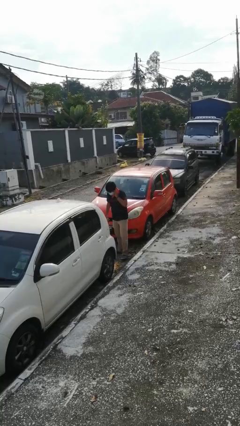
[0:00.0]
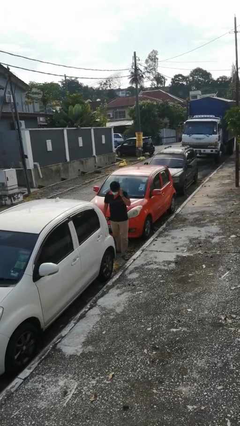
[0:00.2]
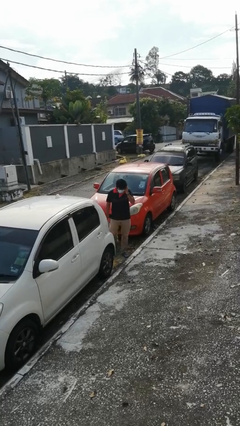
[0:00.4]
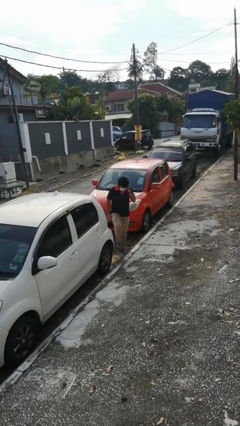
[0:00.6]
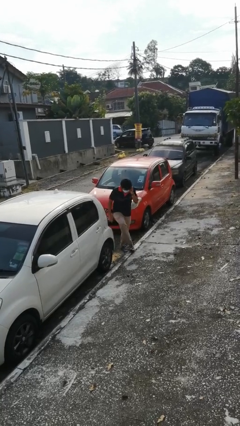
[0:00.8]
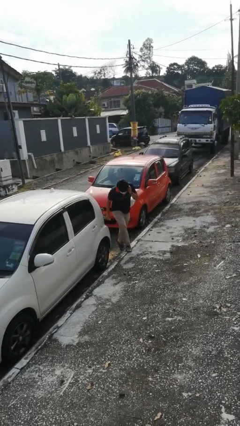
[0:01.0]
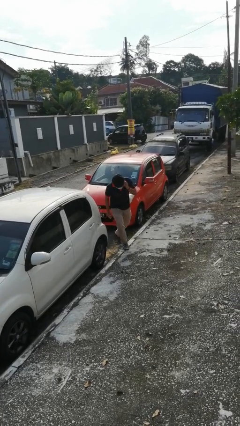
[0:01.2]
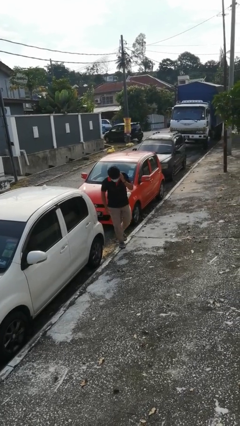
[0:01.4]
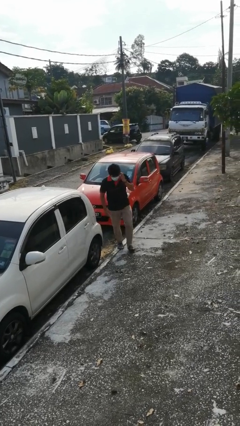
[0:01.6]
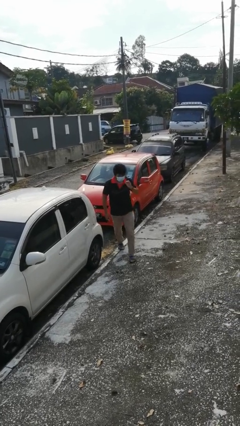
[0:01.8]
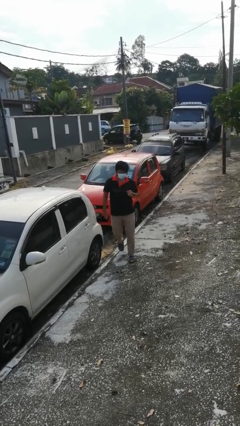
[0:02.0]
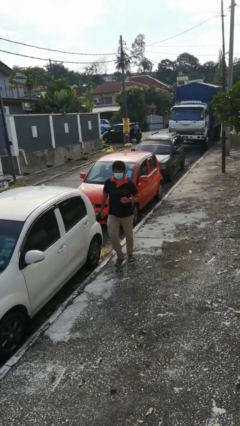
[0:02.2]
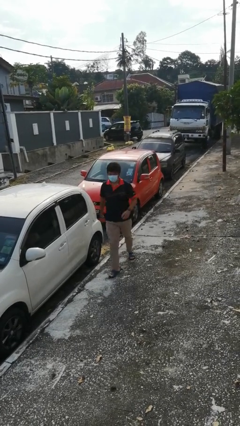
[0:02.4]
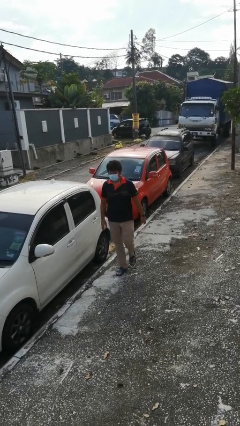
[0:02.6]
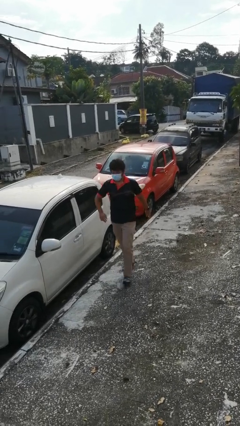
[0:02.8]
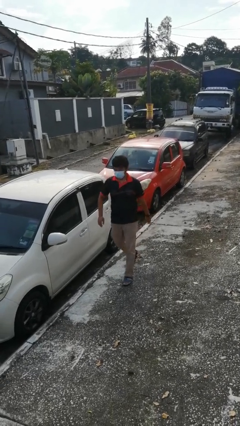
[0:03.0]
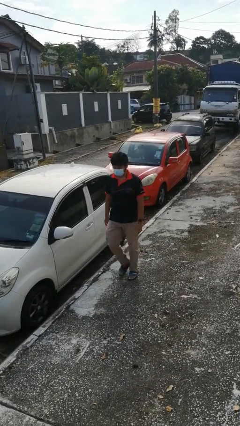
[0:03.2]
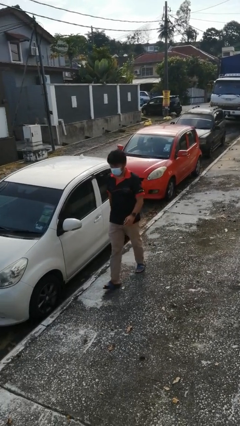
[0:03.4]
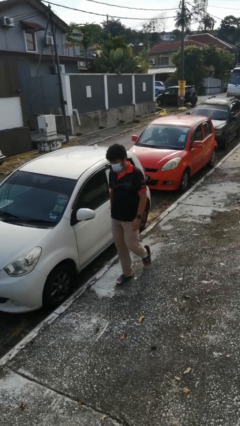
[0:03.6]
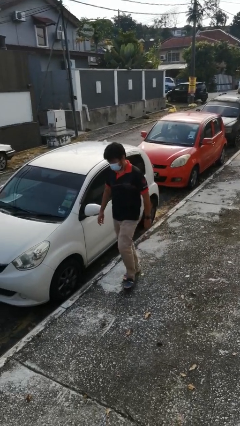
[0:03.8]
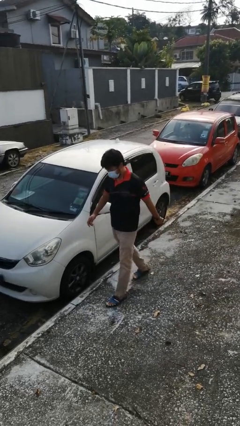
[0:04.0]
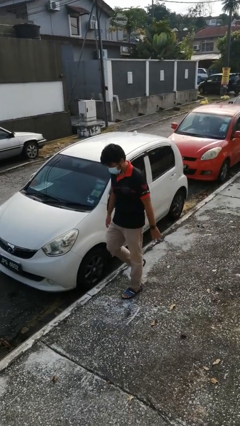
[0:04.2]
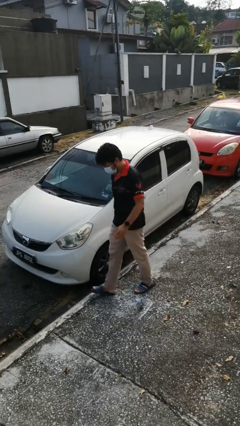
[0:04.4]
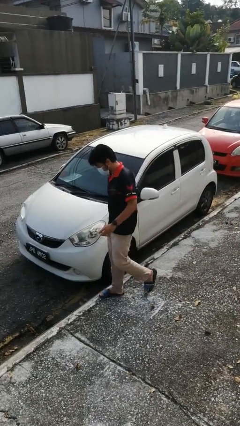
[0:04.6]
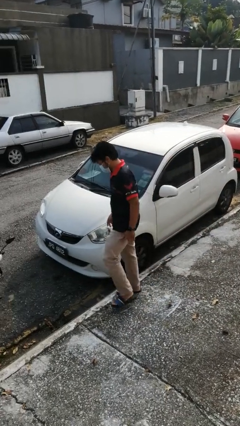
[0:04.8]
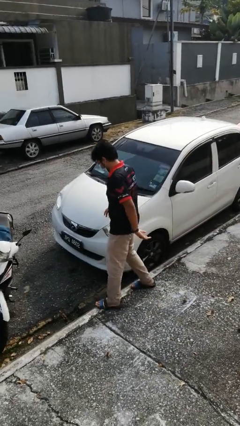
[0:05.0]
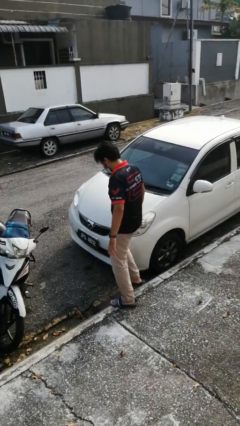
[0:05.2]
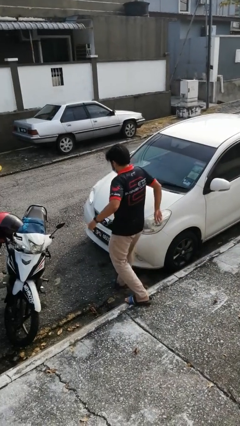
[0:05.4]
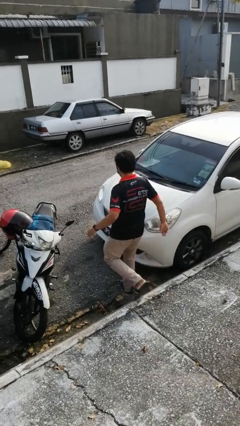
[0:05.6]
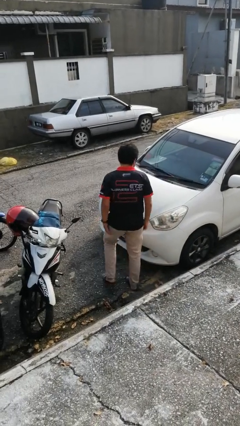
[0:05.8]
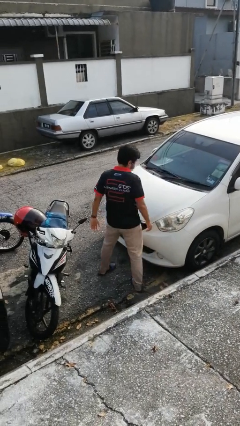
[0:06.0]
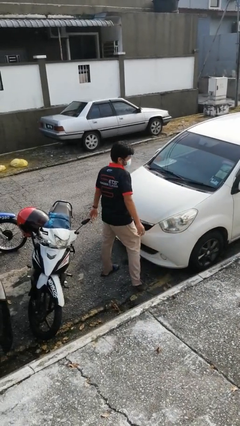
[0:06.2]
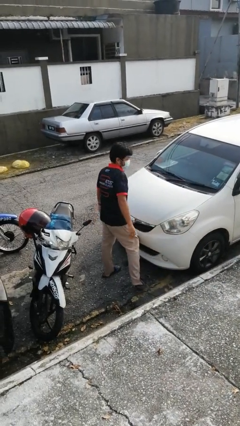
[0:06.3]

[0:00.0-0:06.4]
person walks around car

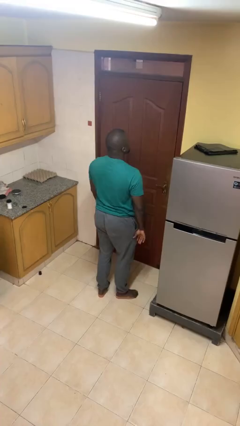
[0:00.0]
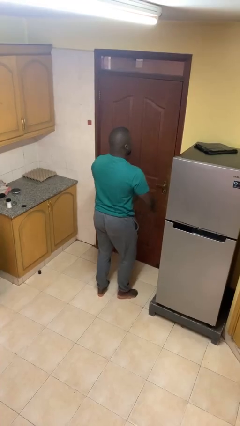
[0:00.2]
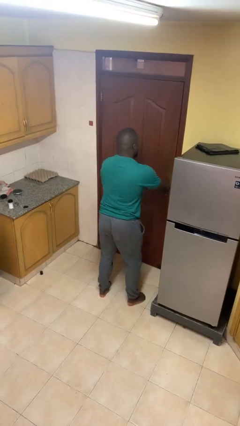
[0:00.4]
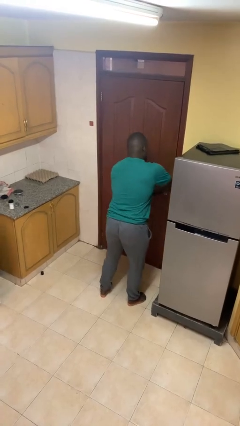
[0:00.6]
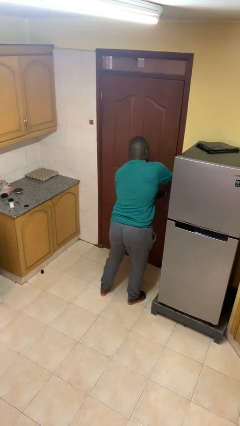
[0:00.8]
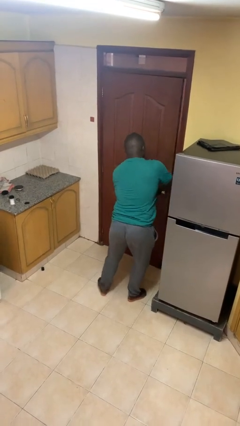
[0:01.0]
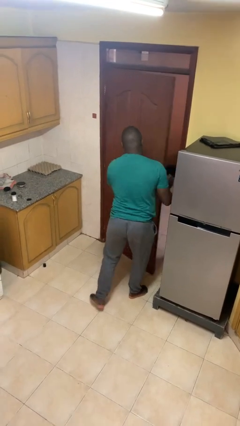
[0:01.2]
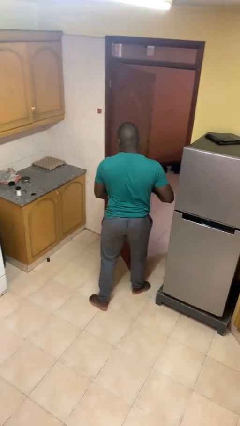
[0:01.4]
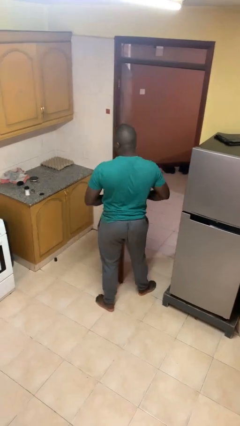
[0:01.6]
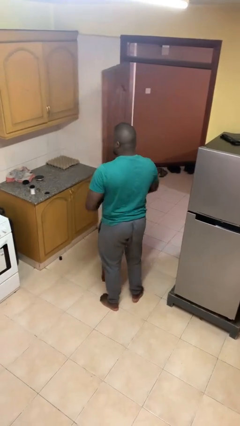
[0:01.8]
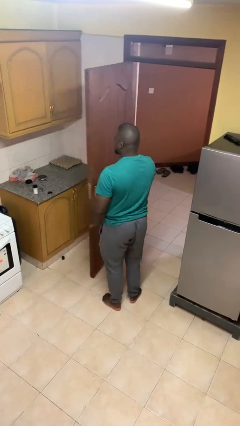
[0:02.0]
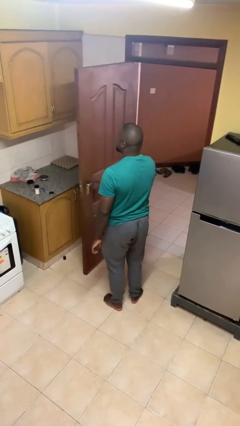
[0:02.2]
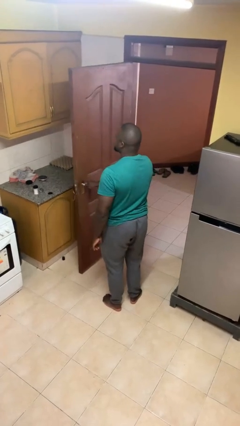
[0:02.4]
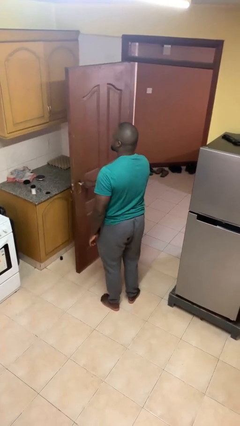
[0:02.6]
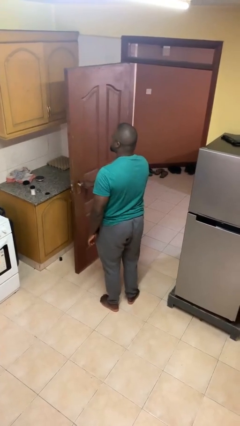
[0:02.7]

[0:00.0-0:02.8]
person opens facility door

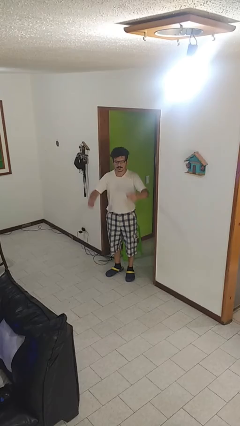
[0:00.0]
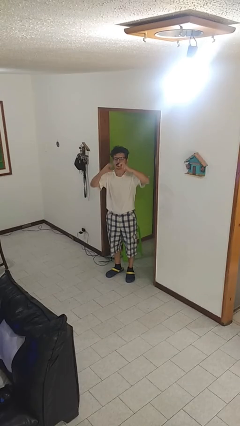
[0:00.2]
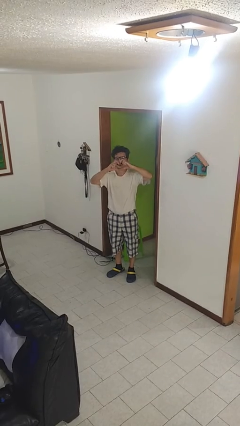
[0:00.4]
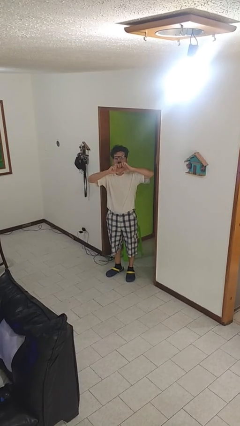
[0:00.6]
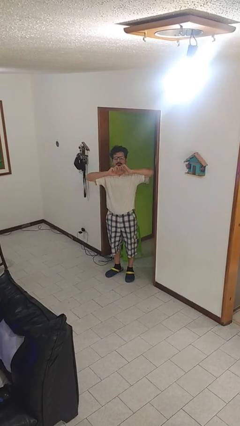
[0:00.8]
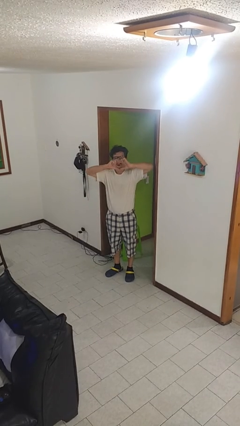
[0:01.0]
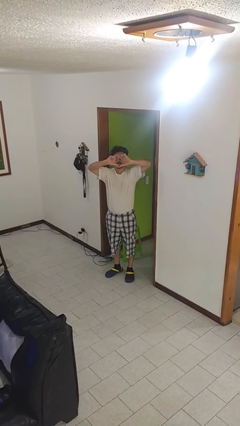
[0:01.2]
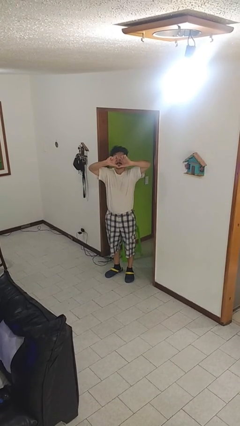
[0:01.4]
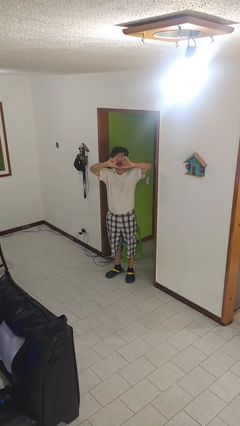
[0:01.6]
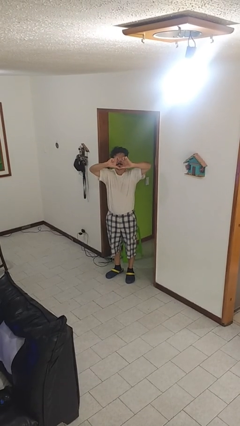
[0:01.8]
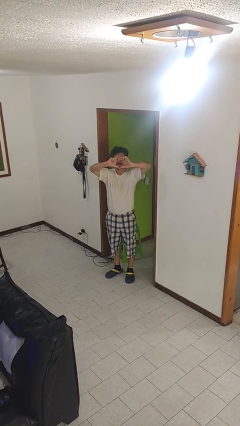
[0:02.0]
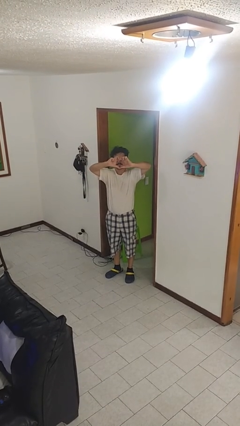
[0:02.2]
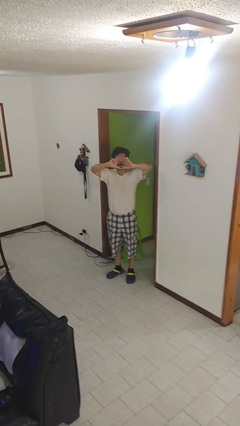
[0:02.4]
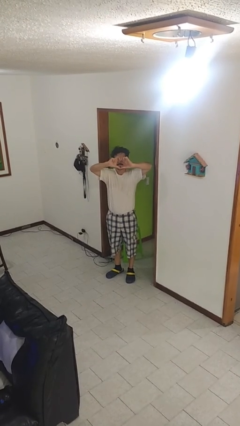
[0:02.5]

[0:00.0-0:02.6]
person gestures heart

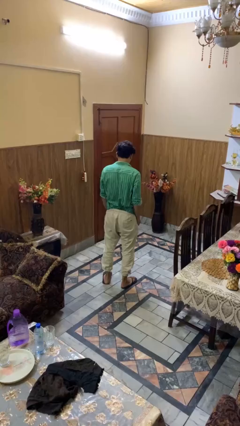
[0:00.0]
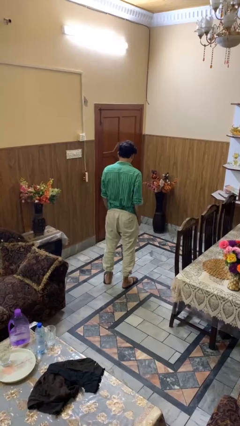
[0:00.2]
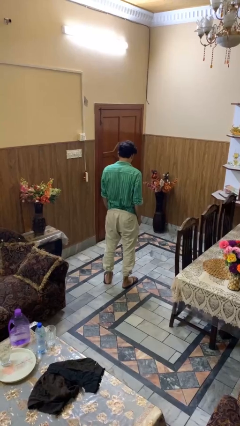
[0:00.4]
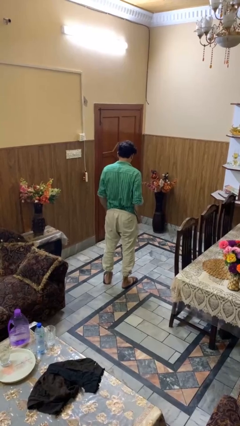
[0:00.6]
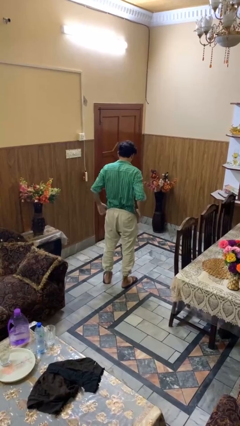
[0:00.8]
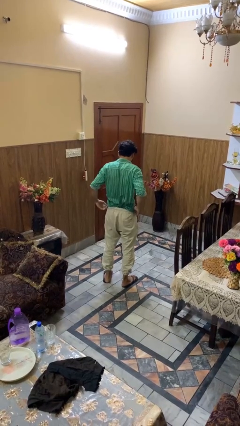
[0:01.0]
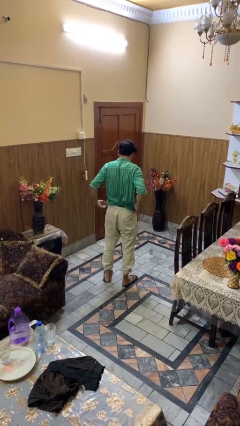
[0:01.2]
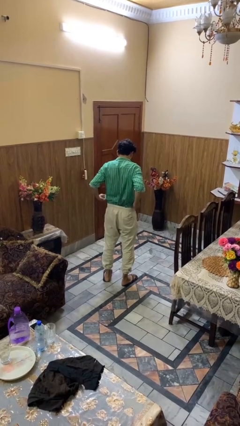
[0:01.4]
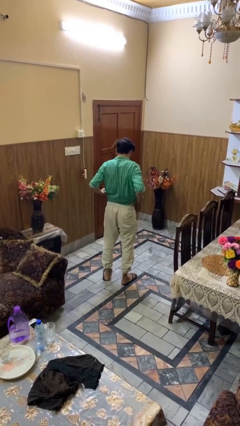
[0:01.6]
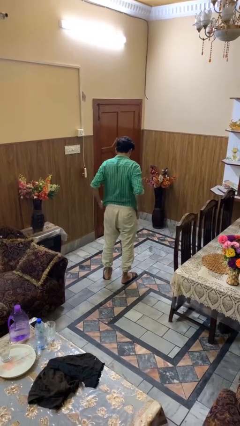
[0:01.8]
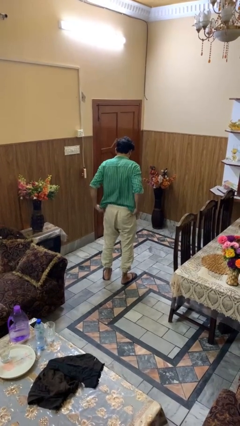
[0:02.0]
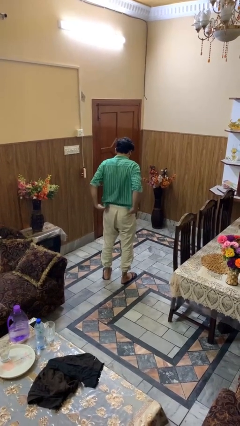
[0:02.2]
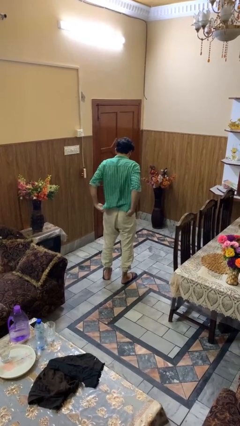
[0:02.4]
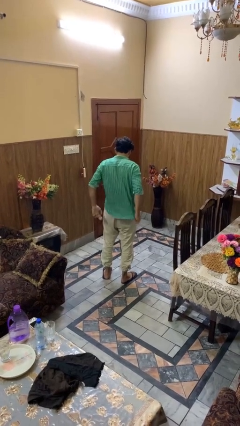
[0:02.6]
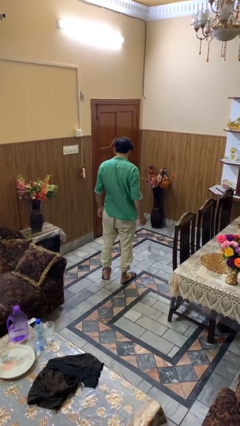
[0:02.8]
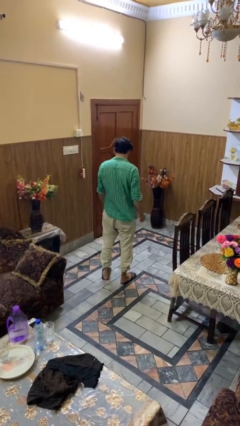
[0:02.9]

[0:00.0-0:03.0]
person untucks shirt

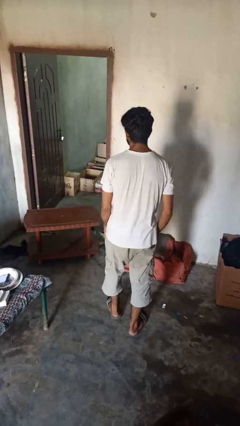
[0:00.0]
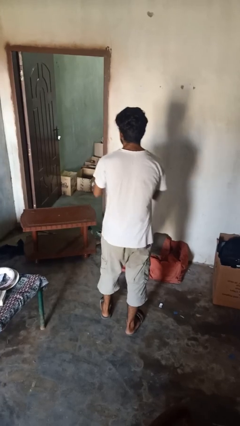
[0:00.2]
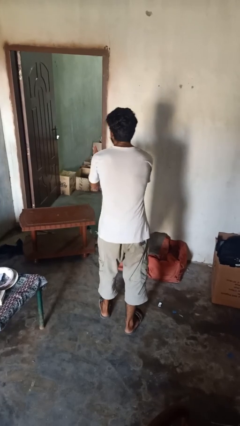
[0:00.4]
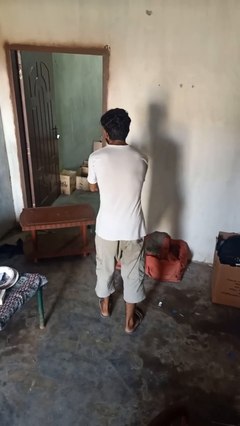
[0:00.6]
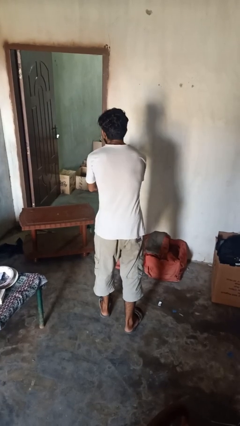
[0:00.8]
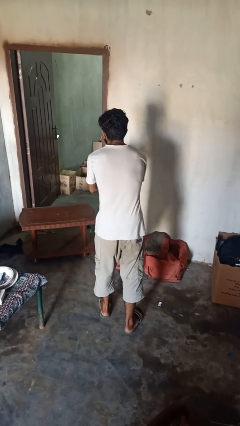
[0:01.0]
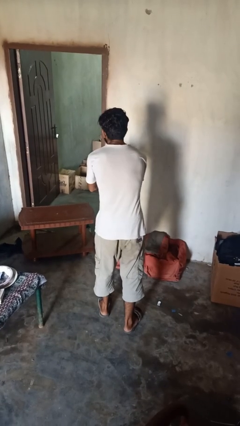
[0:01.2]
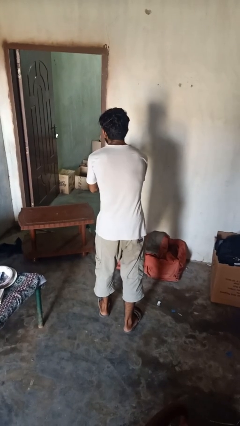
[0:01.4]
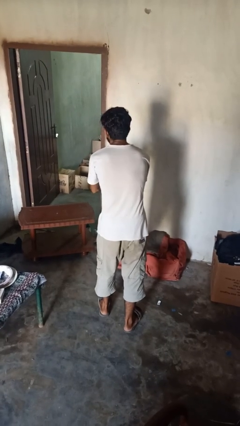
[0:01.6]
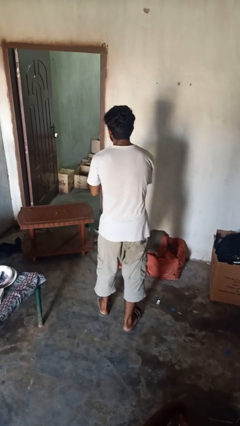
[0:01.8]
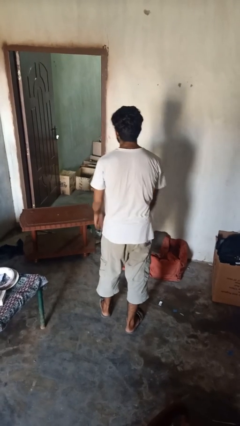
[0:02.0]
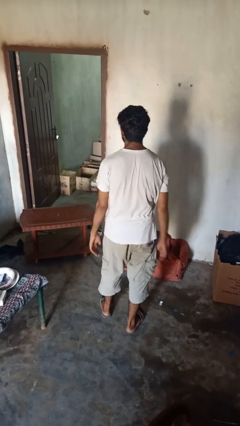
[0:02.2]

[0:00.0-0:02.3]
person karate chop

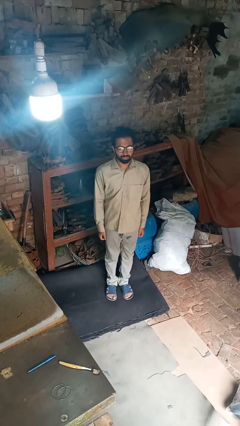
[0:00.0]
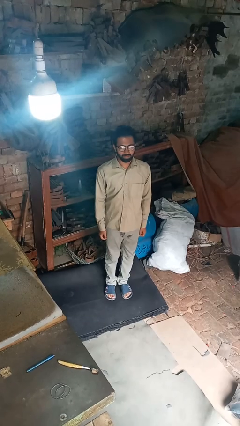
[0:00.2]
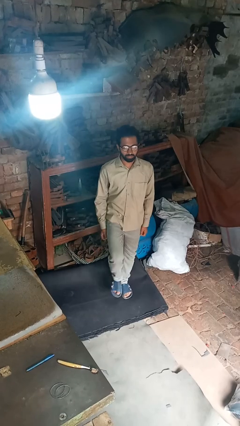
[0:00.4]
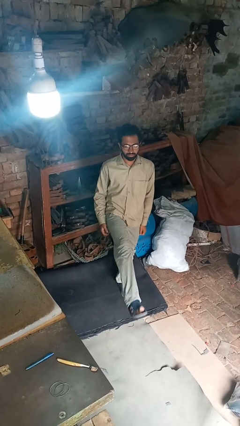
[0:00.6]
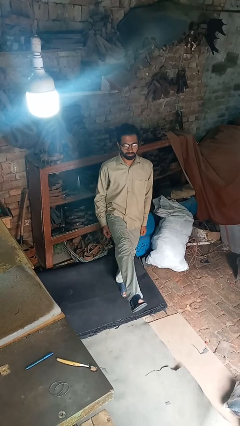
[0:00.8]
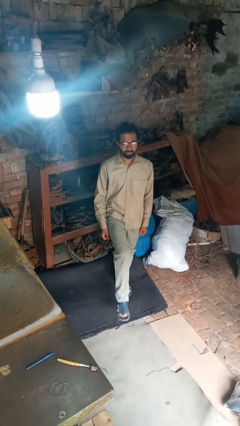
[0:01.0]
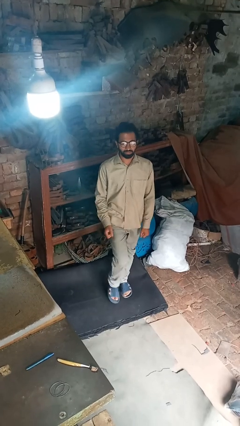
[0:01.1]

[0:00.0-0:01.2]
person karate kicks
